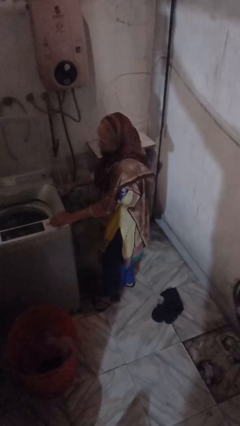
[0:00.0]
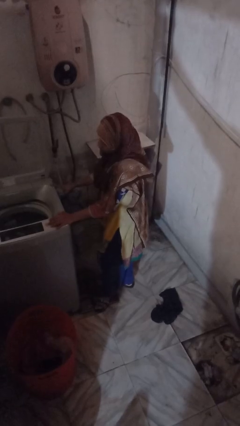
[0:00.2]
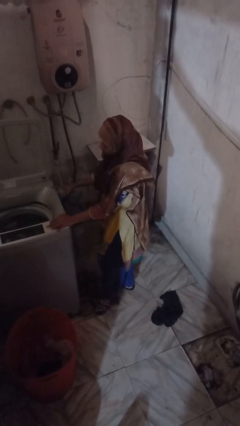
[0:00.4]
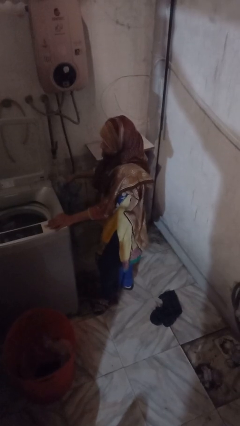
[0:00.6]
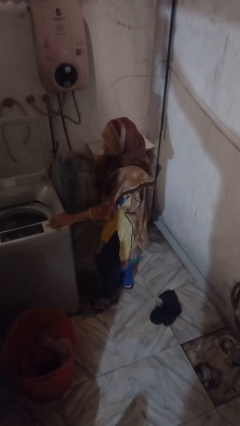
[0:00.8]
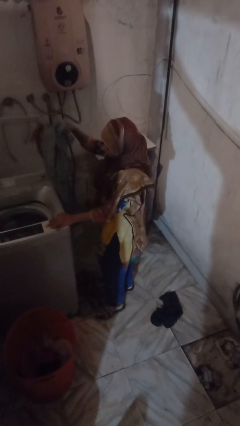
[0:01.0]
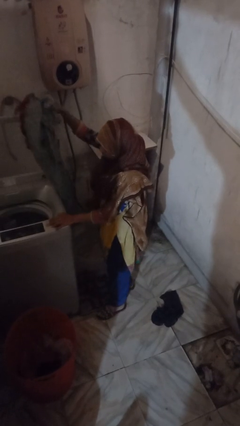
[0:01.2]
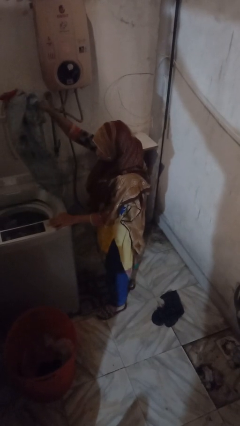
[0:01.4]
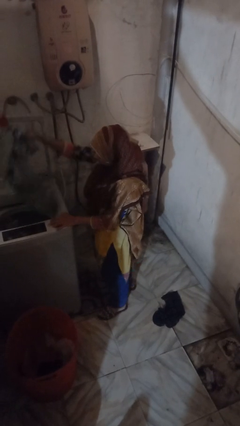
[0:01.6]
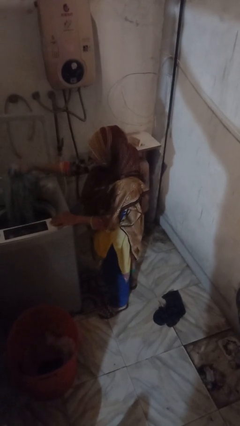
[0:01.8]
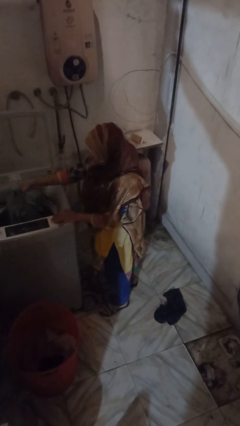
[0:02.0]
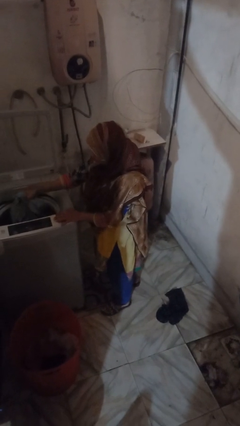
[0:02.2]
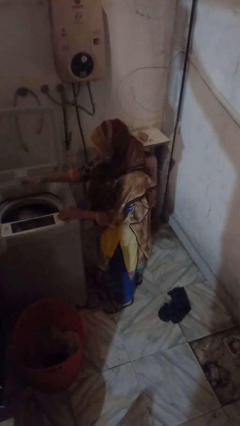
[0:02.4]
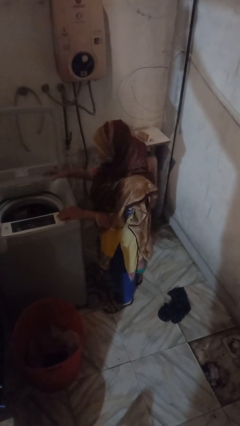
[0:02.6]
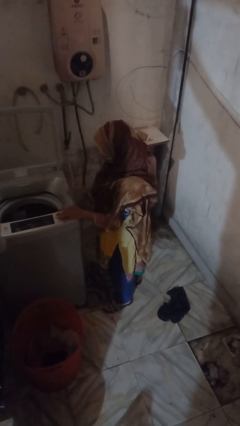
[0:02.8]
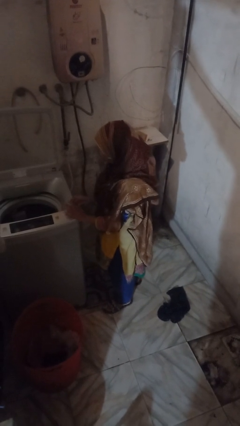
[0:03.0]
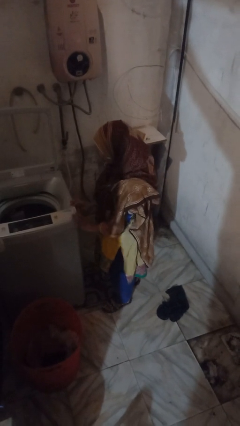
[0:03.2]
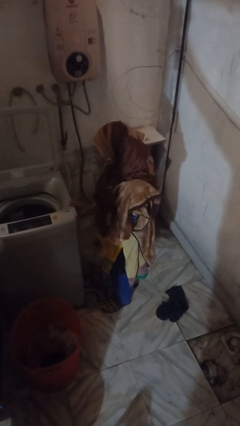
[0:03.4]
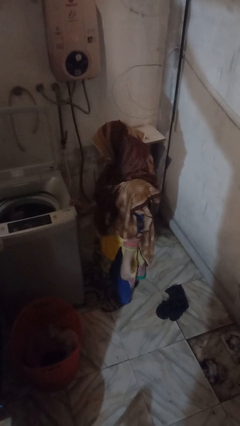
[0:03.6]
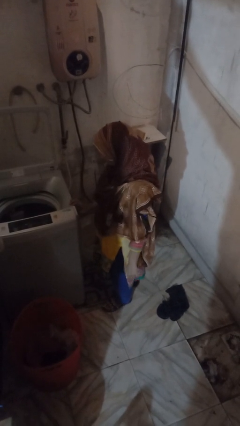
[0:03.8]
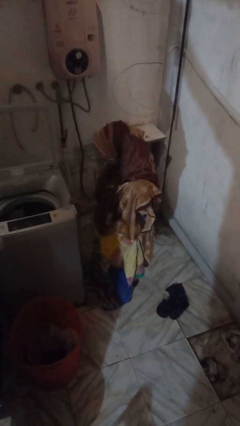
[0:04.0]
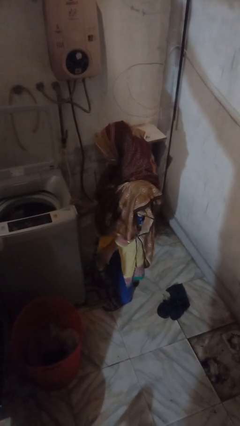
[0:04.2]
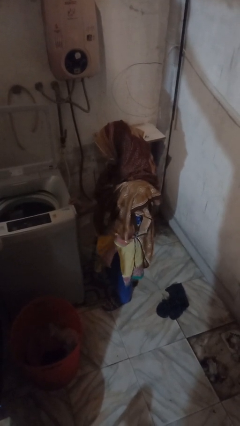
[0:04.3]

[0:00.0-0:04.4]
person loads dryer

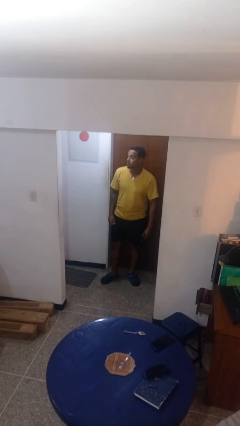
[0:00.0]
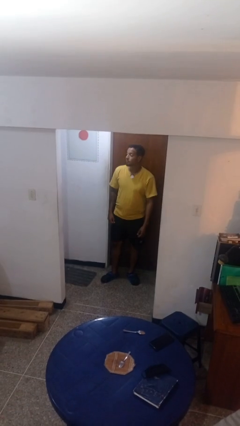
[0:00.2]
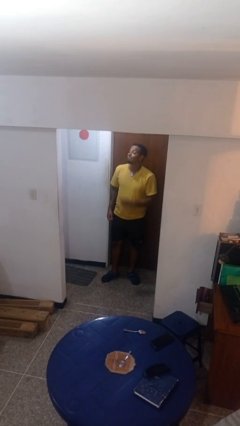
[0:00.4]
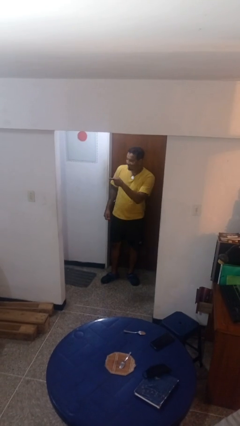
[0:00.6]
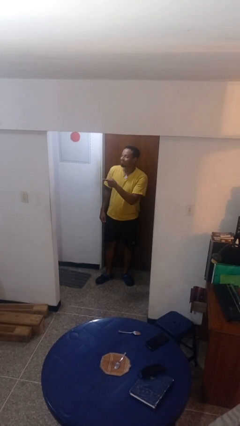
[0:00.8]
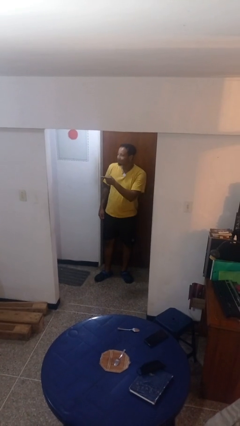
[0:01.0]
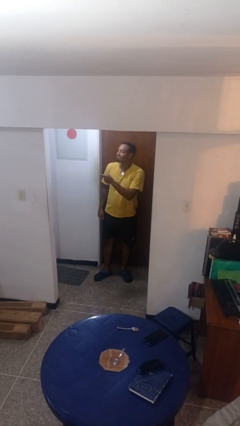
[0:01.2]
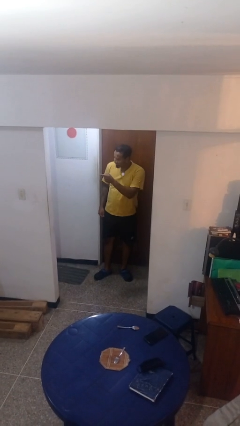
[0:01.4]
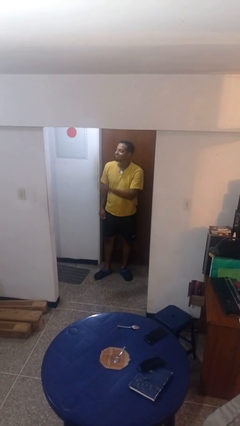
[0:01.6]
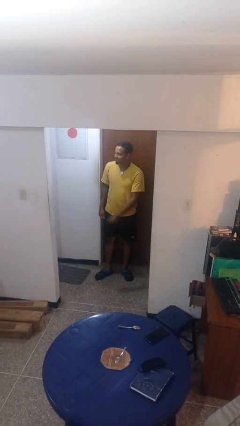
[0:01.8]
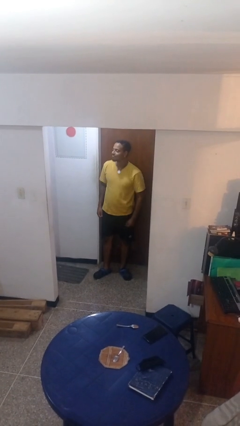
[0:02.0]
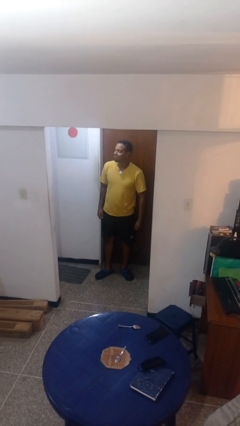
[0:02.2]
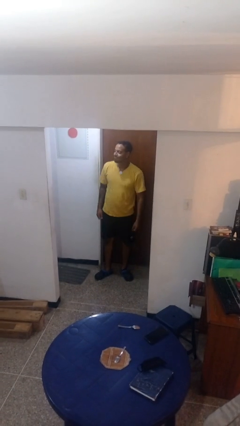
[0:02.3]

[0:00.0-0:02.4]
person nods head

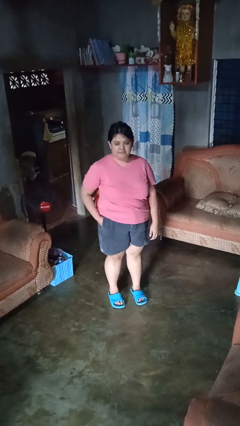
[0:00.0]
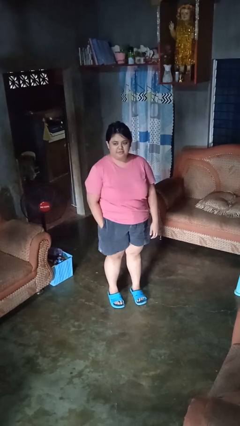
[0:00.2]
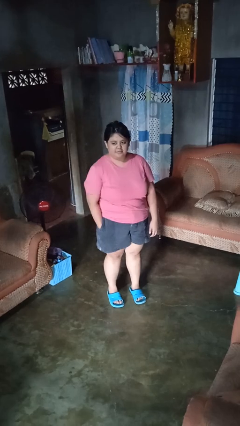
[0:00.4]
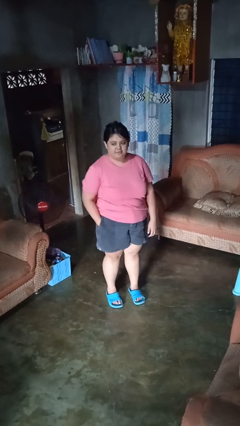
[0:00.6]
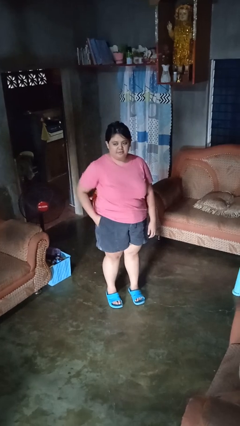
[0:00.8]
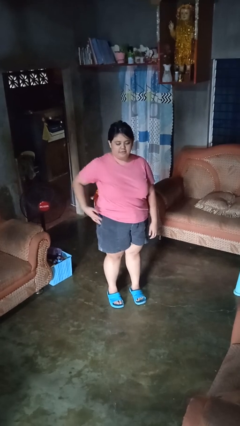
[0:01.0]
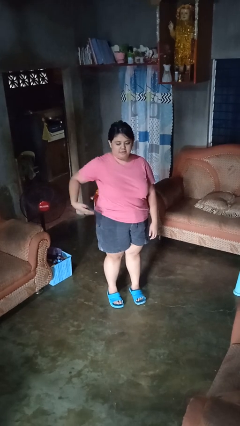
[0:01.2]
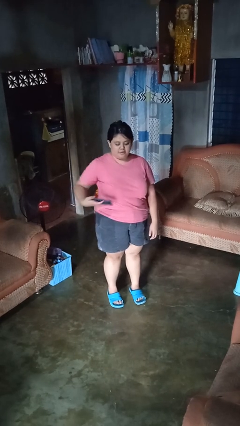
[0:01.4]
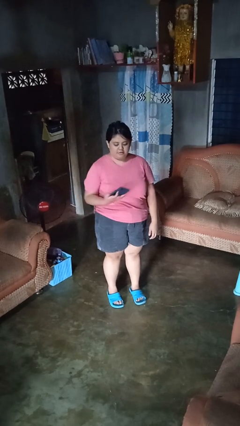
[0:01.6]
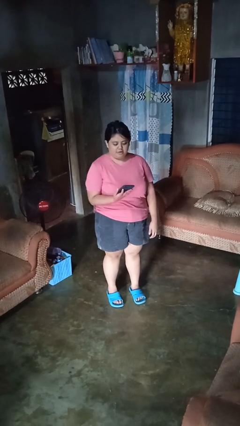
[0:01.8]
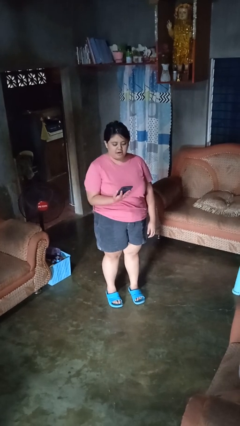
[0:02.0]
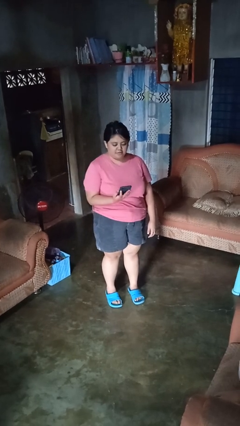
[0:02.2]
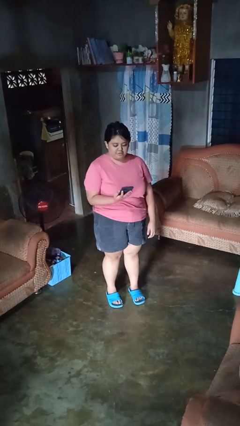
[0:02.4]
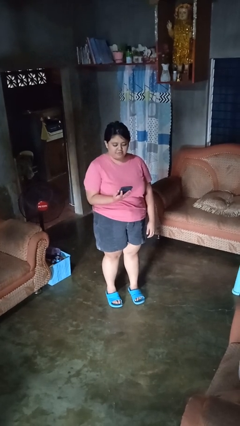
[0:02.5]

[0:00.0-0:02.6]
person takes phone from pocket

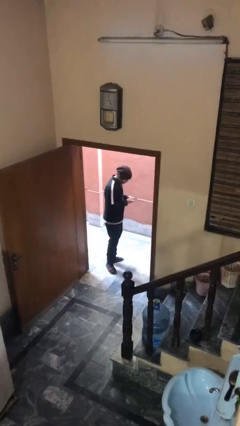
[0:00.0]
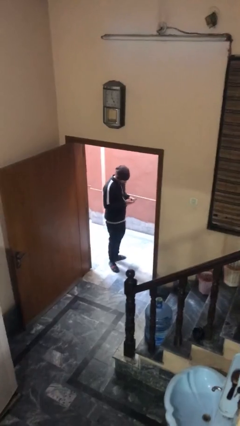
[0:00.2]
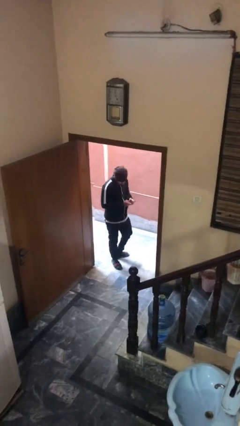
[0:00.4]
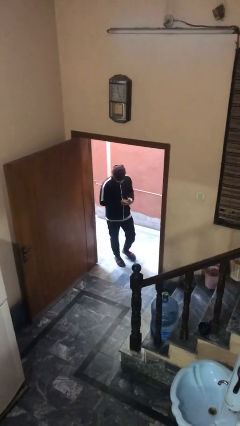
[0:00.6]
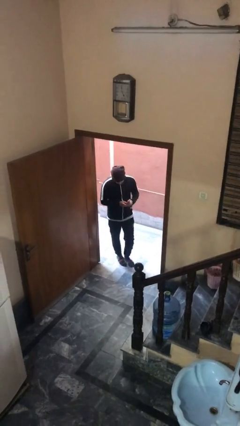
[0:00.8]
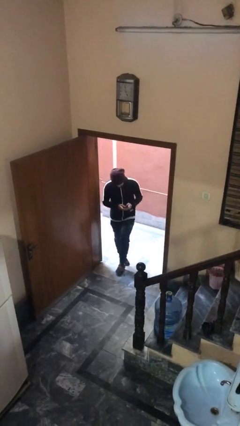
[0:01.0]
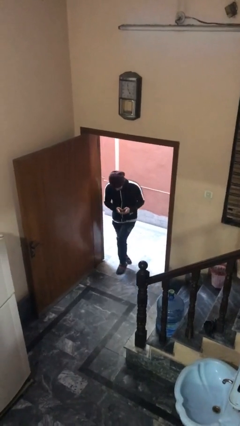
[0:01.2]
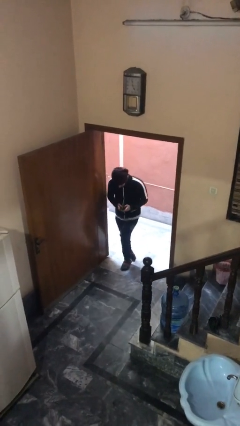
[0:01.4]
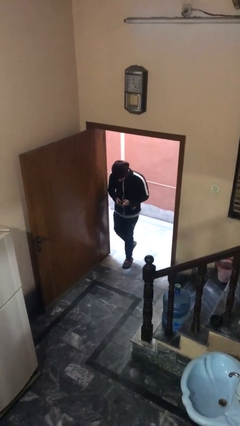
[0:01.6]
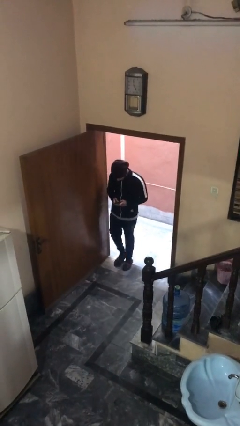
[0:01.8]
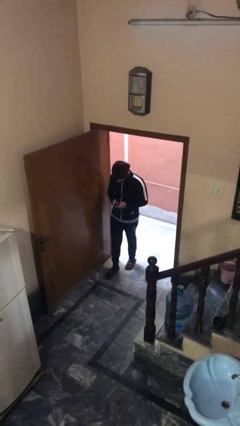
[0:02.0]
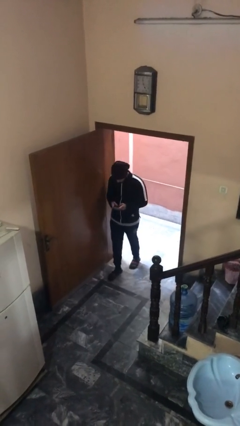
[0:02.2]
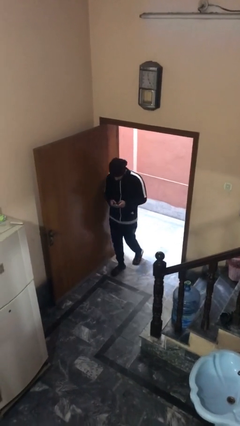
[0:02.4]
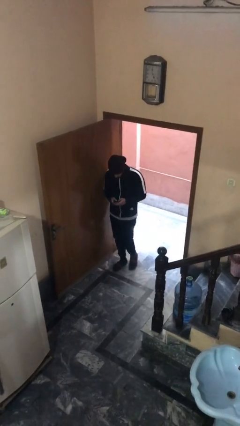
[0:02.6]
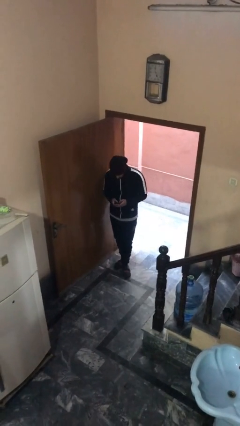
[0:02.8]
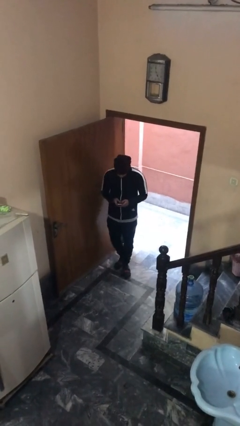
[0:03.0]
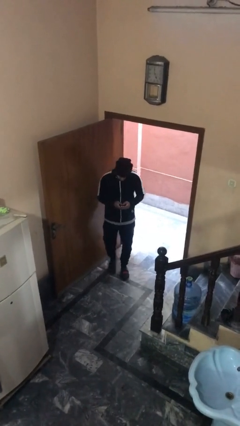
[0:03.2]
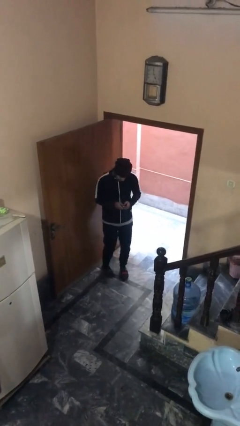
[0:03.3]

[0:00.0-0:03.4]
person enters scene through structure

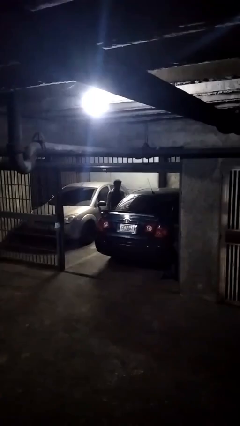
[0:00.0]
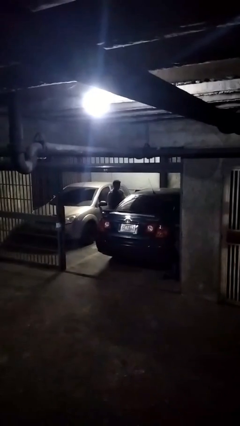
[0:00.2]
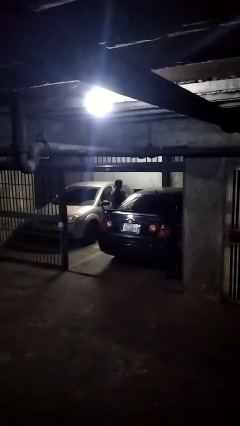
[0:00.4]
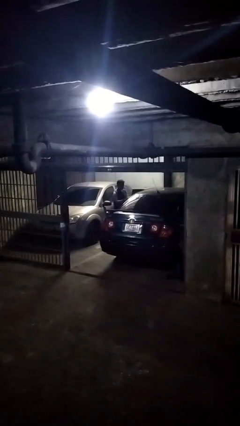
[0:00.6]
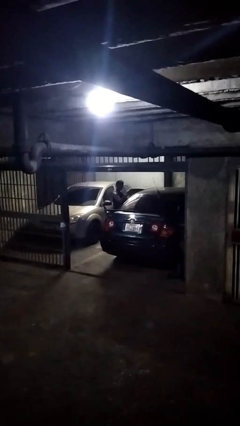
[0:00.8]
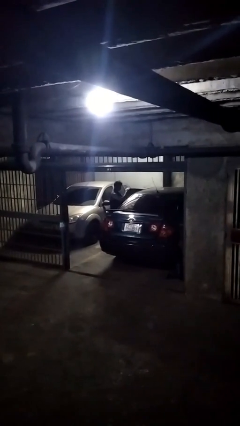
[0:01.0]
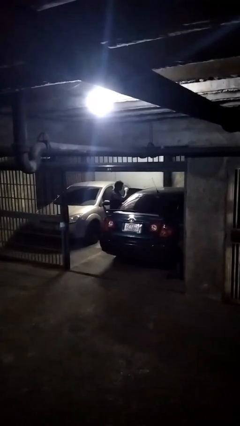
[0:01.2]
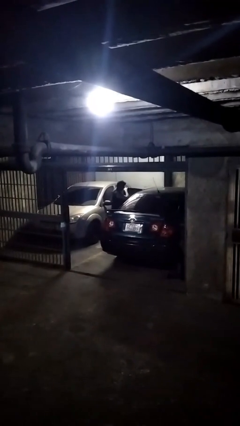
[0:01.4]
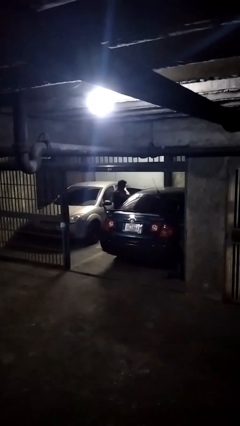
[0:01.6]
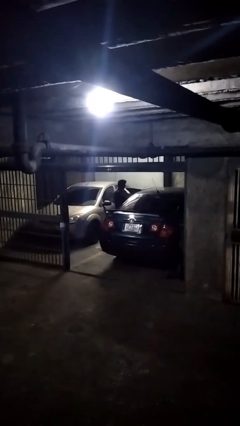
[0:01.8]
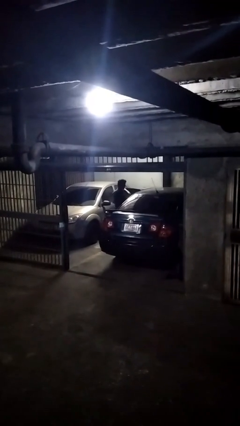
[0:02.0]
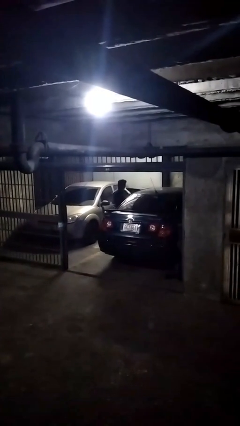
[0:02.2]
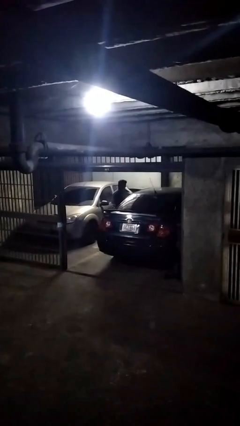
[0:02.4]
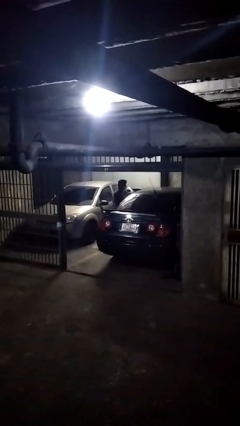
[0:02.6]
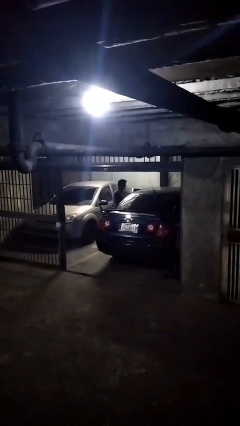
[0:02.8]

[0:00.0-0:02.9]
person opens car door

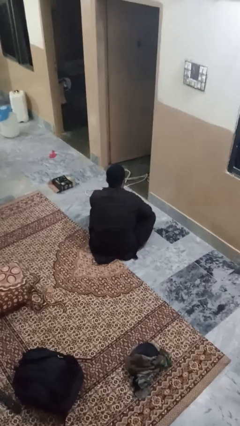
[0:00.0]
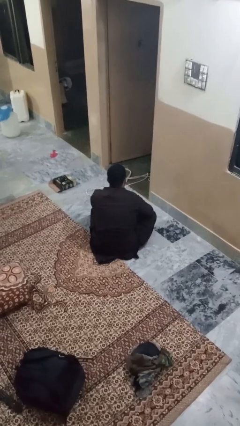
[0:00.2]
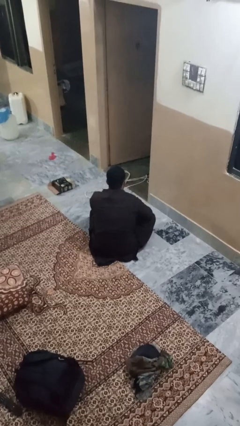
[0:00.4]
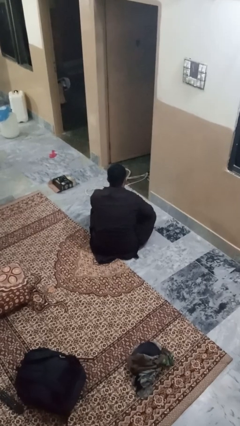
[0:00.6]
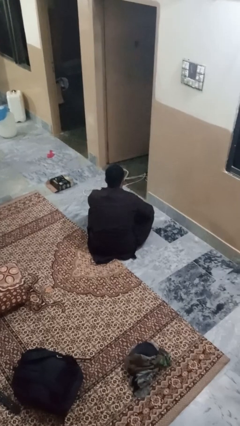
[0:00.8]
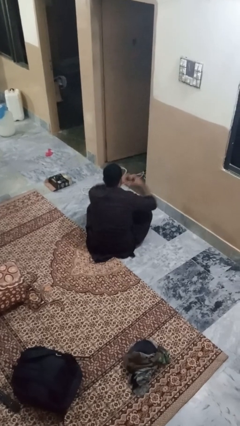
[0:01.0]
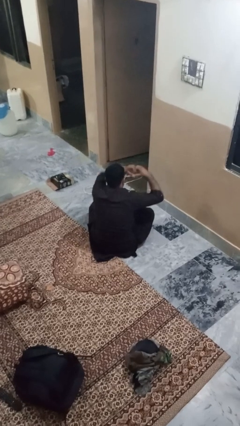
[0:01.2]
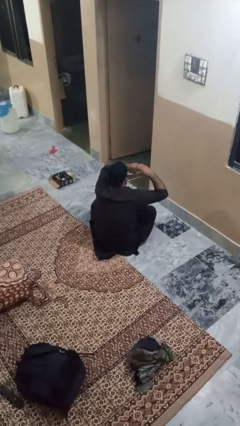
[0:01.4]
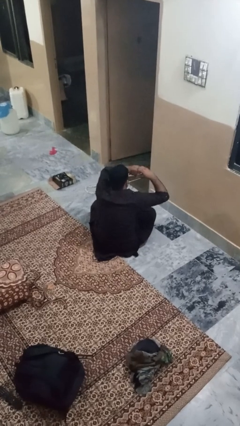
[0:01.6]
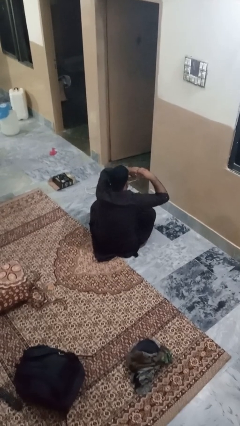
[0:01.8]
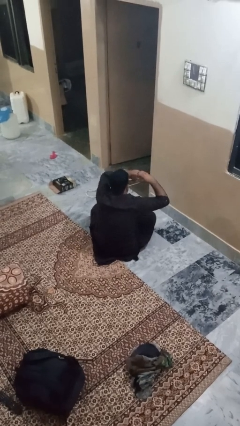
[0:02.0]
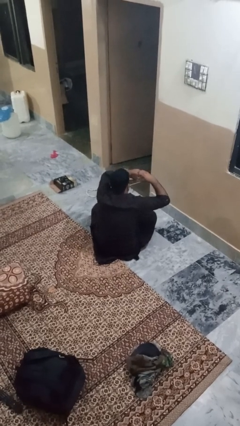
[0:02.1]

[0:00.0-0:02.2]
person gestures heart
